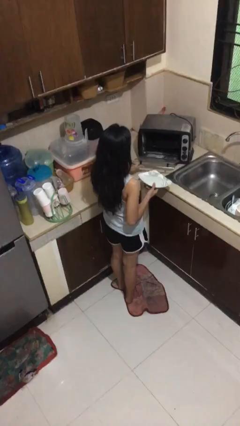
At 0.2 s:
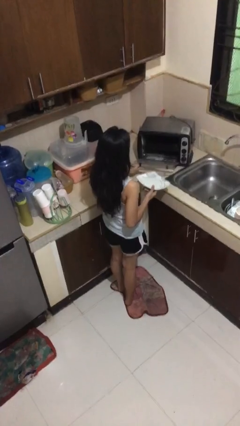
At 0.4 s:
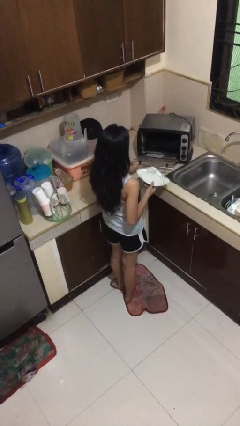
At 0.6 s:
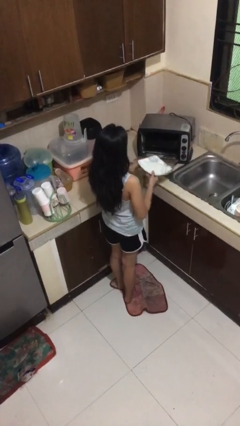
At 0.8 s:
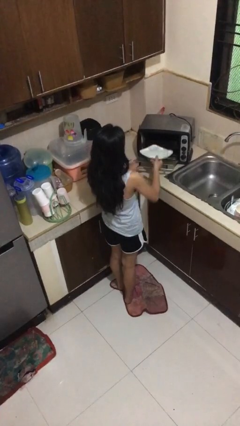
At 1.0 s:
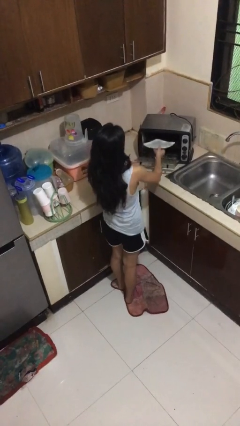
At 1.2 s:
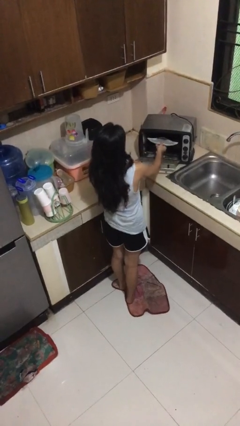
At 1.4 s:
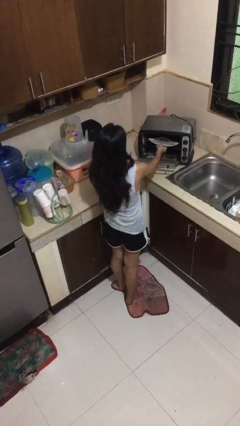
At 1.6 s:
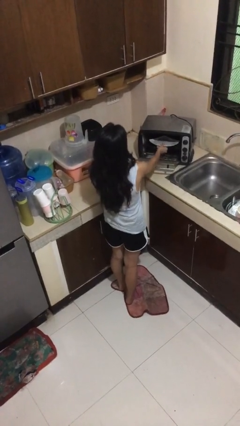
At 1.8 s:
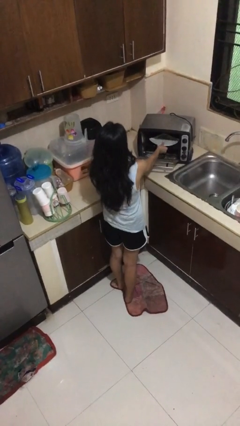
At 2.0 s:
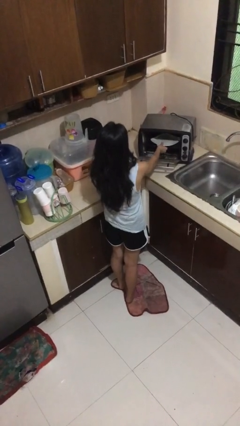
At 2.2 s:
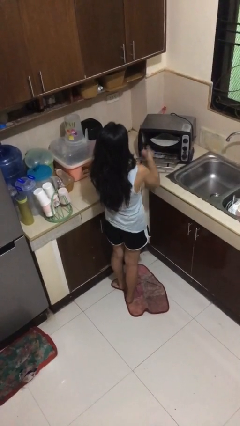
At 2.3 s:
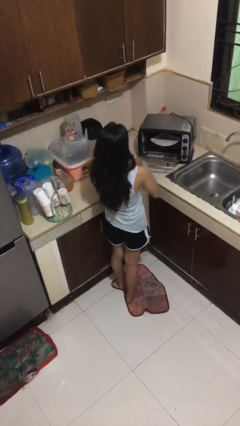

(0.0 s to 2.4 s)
person puts object into microwave

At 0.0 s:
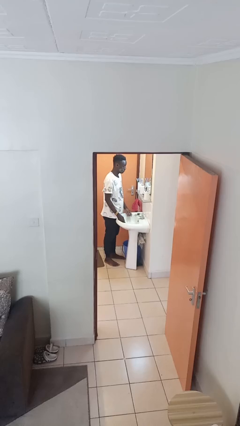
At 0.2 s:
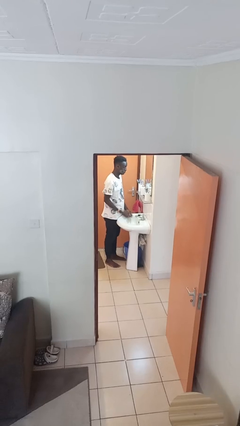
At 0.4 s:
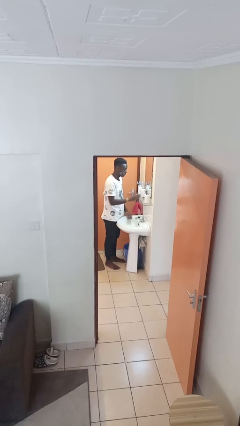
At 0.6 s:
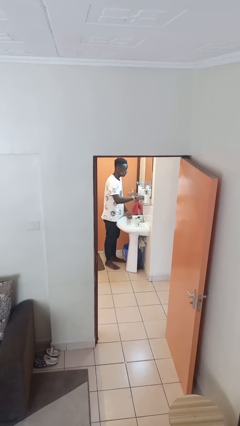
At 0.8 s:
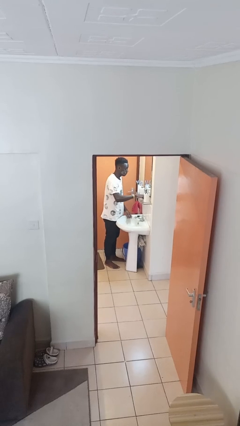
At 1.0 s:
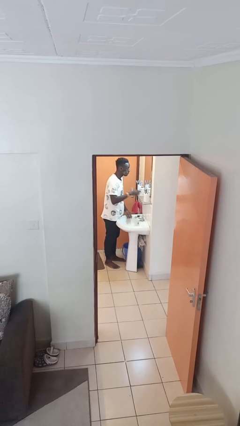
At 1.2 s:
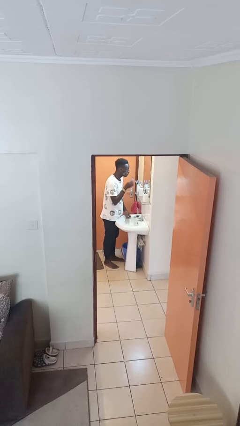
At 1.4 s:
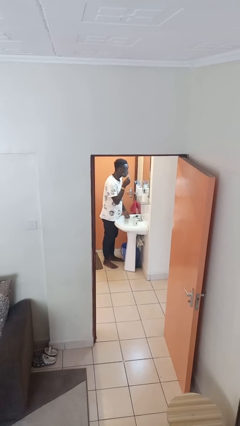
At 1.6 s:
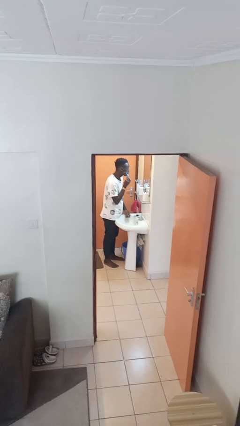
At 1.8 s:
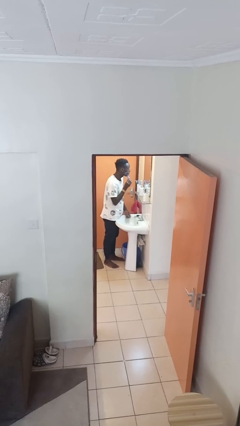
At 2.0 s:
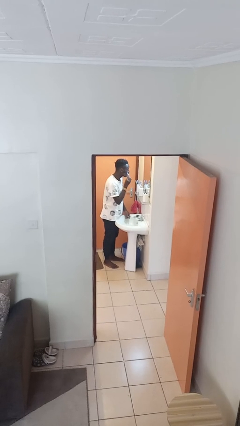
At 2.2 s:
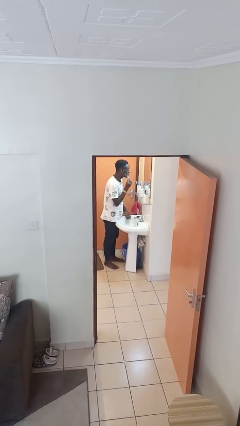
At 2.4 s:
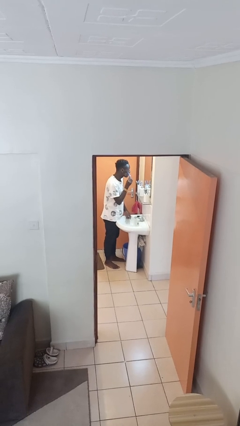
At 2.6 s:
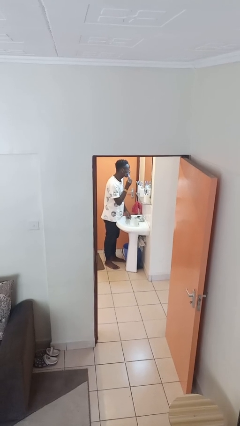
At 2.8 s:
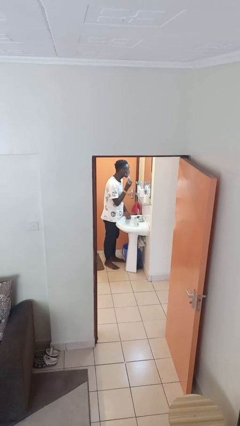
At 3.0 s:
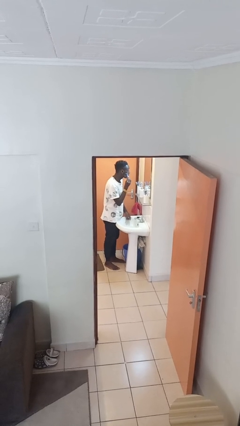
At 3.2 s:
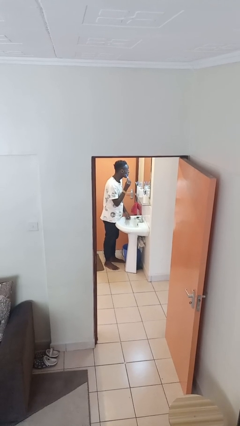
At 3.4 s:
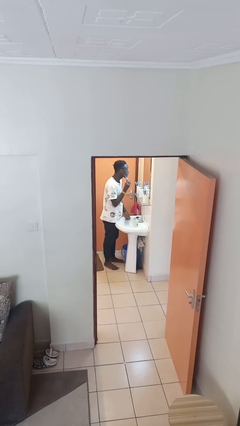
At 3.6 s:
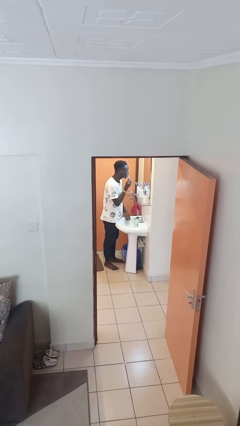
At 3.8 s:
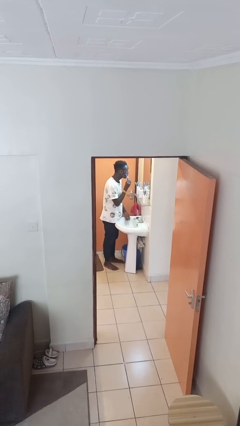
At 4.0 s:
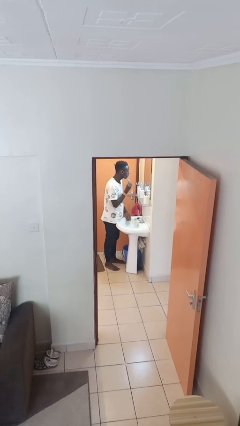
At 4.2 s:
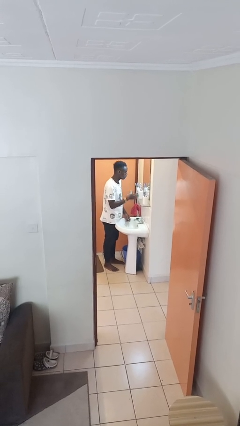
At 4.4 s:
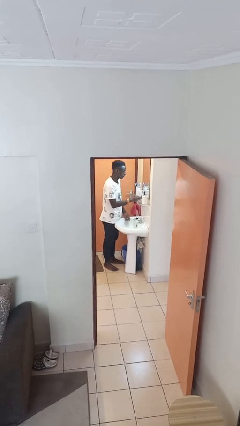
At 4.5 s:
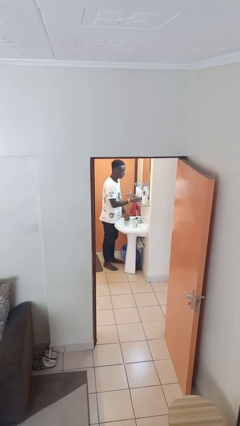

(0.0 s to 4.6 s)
person shaves face

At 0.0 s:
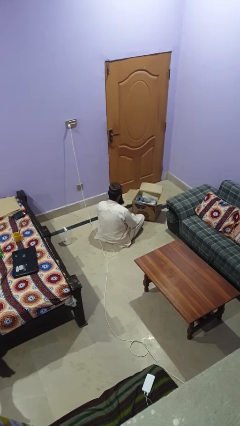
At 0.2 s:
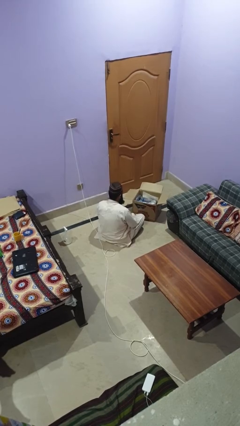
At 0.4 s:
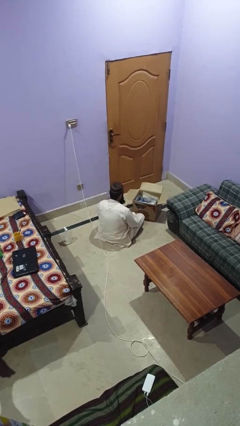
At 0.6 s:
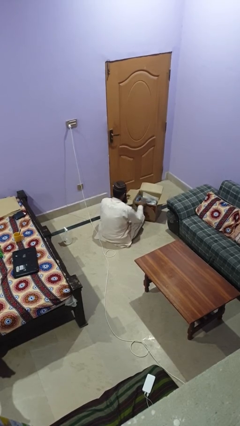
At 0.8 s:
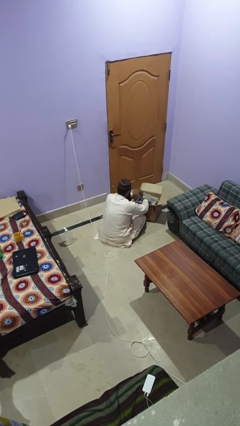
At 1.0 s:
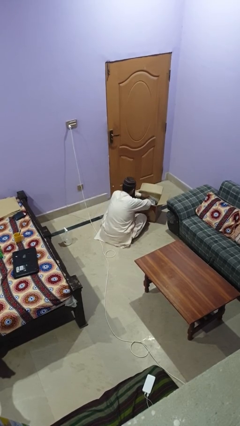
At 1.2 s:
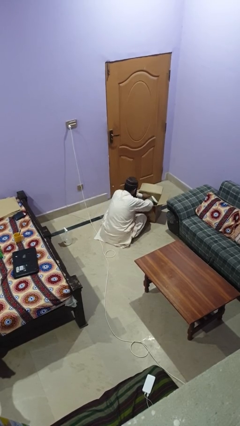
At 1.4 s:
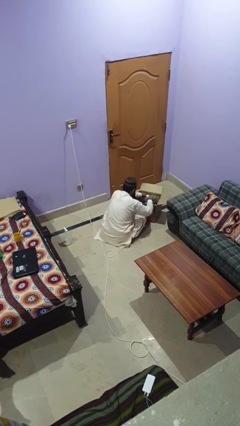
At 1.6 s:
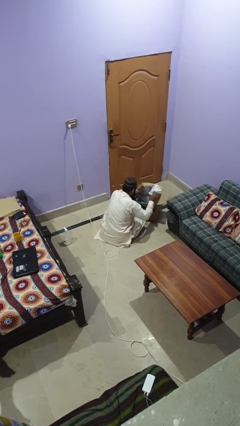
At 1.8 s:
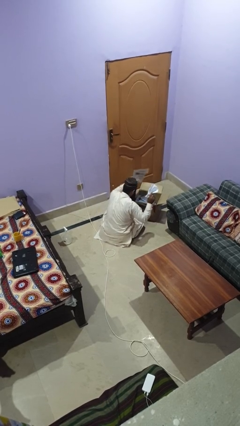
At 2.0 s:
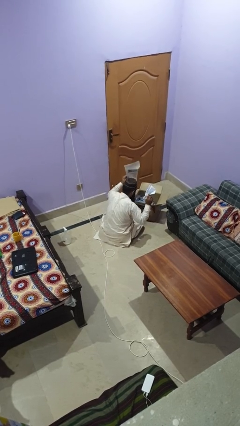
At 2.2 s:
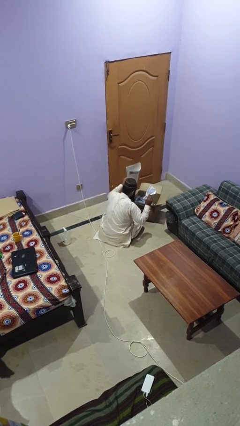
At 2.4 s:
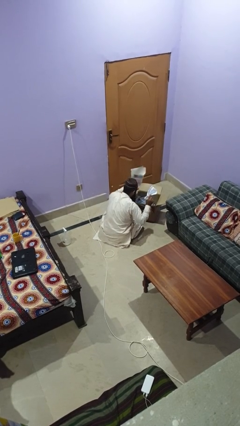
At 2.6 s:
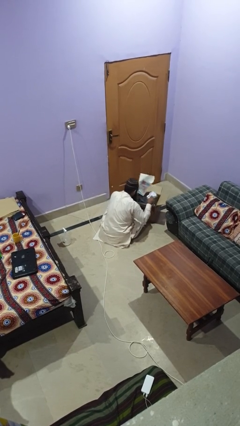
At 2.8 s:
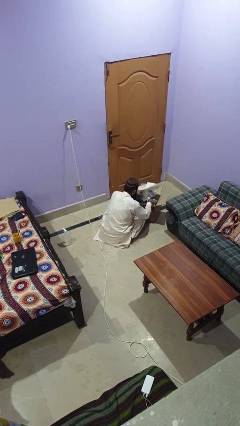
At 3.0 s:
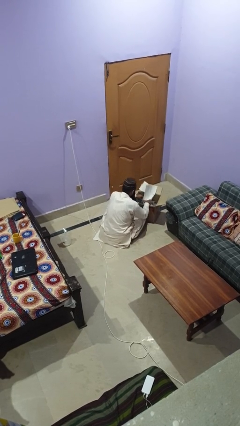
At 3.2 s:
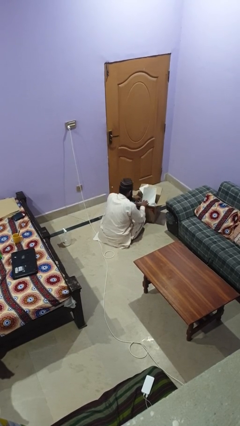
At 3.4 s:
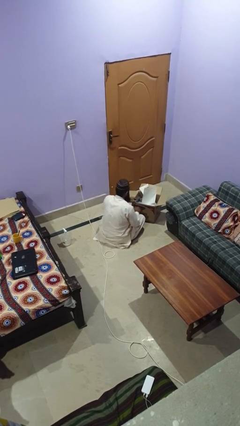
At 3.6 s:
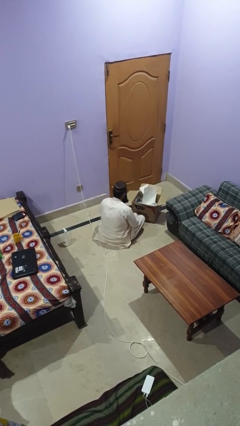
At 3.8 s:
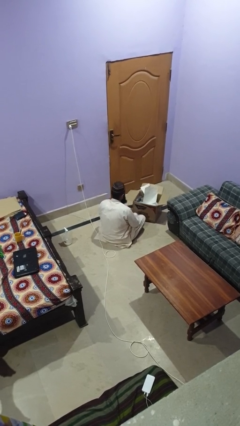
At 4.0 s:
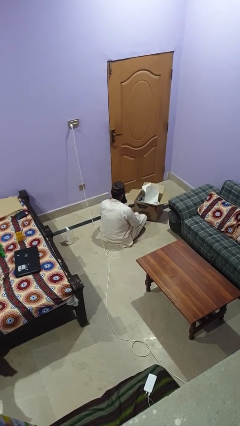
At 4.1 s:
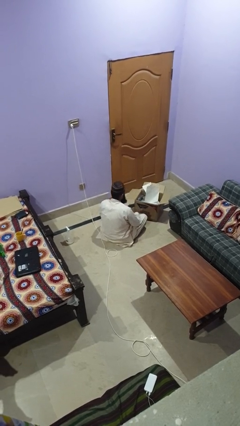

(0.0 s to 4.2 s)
person searches in box

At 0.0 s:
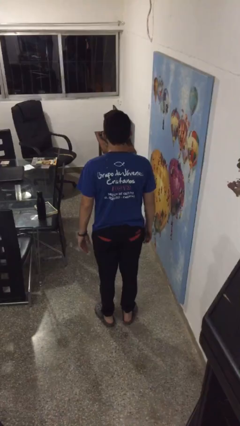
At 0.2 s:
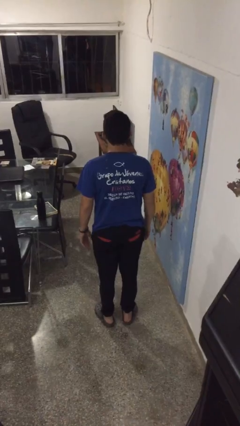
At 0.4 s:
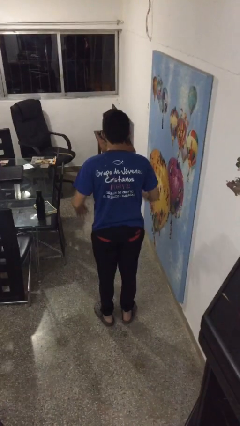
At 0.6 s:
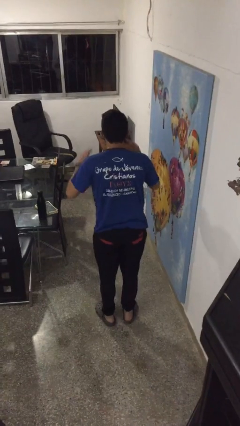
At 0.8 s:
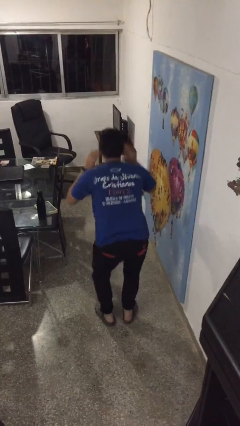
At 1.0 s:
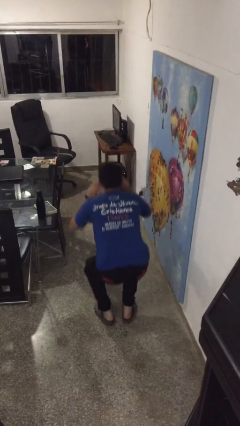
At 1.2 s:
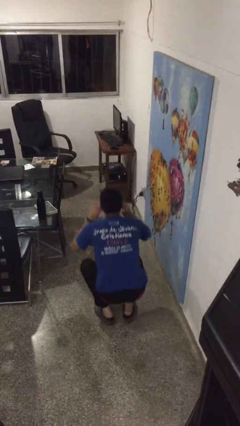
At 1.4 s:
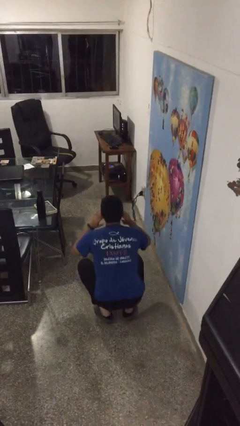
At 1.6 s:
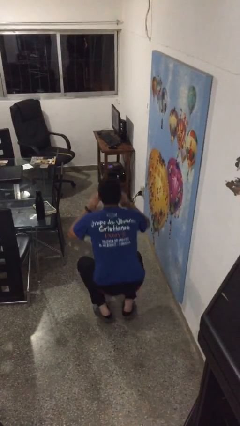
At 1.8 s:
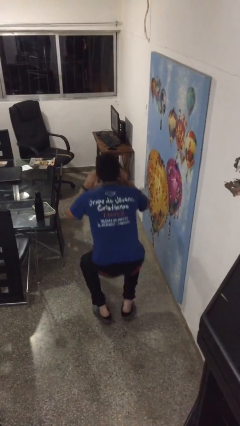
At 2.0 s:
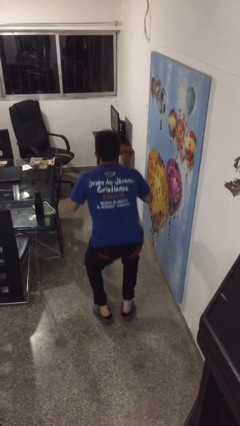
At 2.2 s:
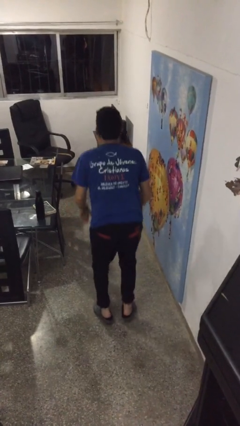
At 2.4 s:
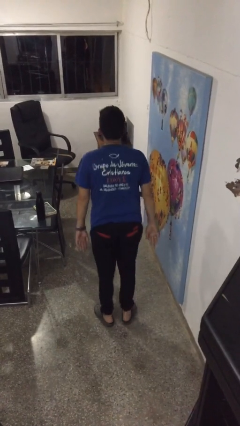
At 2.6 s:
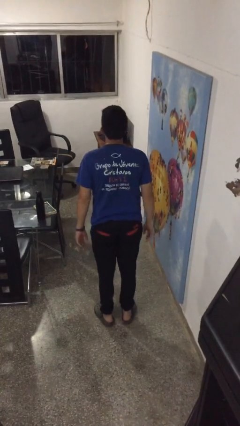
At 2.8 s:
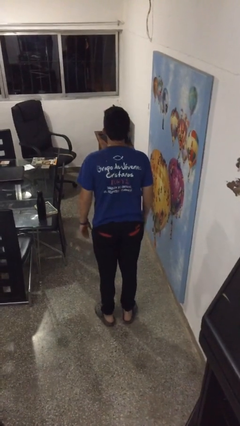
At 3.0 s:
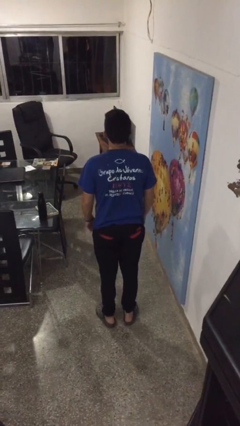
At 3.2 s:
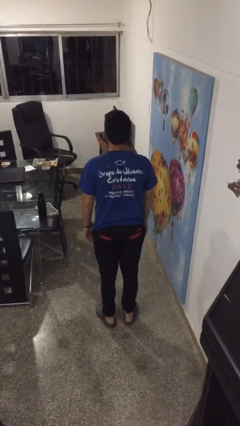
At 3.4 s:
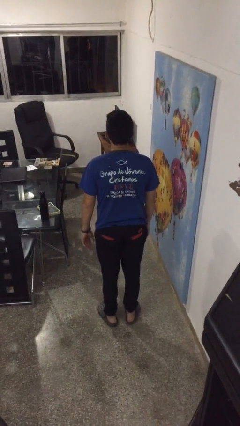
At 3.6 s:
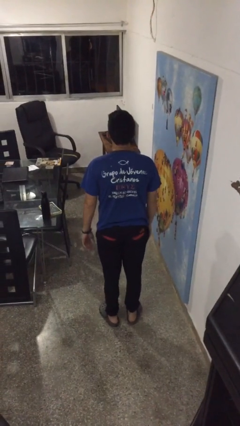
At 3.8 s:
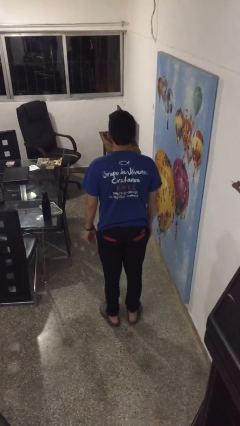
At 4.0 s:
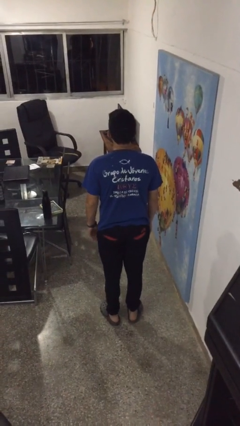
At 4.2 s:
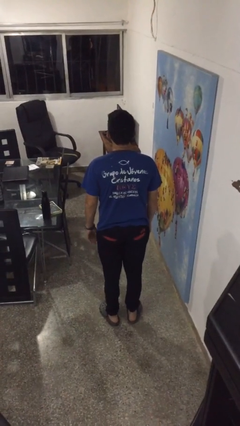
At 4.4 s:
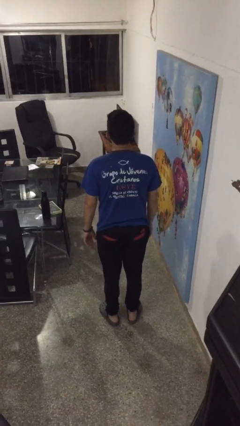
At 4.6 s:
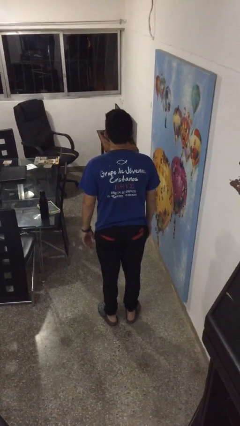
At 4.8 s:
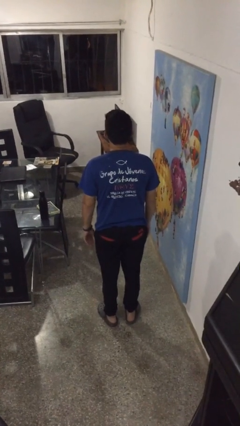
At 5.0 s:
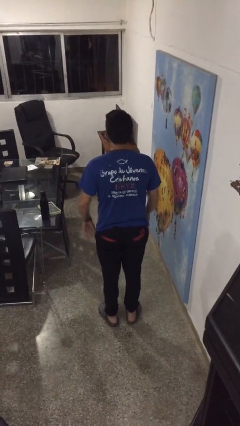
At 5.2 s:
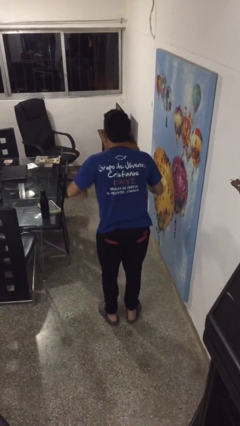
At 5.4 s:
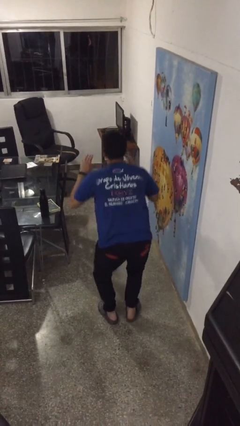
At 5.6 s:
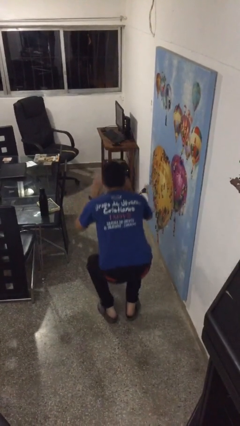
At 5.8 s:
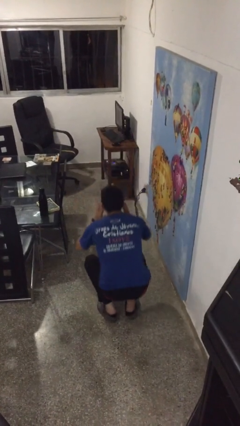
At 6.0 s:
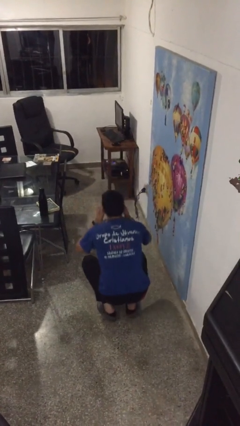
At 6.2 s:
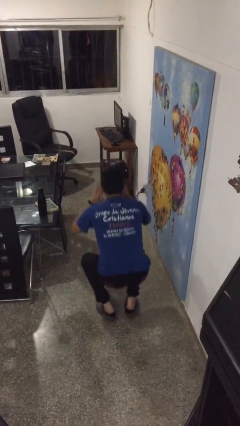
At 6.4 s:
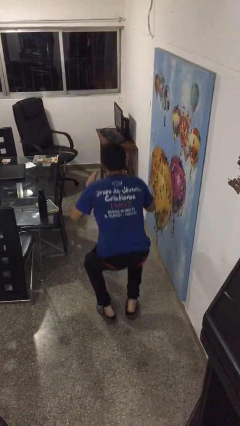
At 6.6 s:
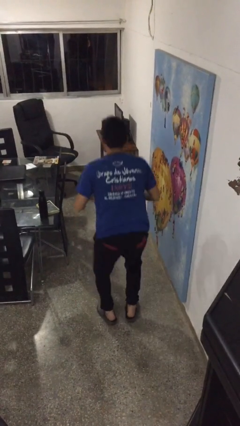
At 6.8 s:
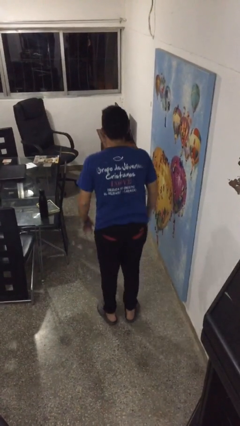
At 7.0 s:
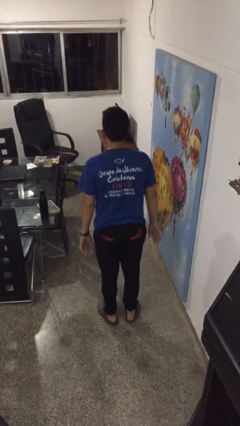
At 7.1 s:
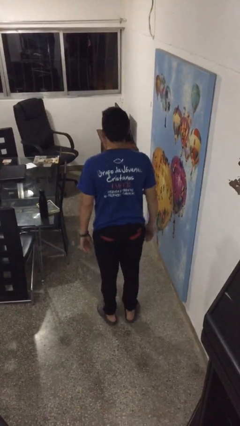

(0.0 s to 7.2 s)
person exercises with situp
